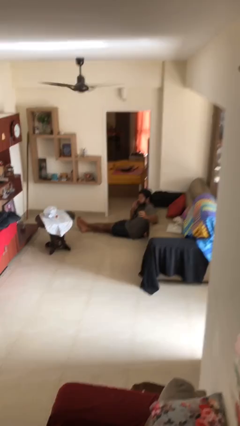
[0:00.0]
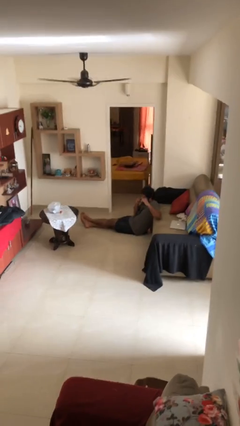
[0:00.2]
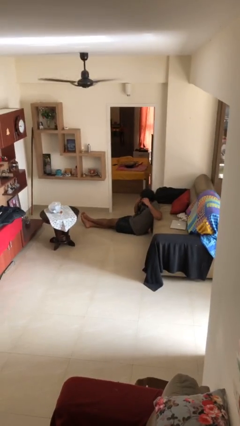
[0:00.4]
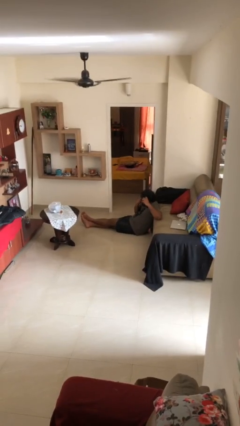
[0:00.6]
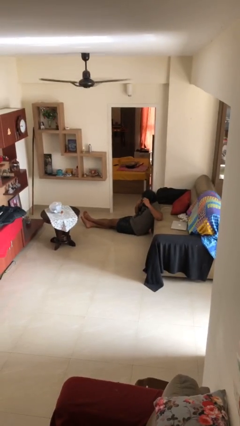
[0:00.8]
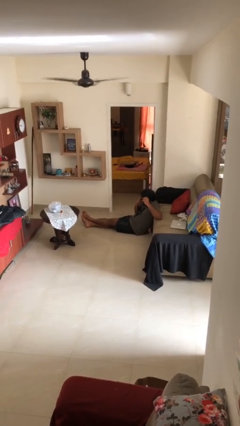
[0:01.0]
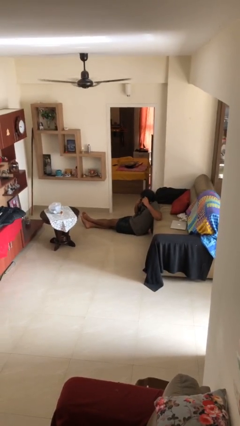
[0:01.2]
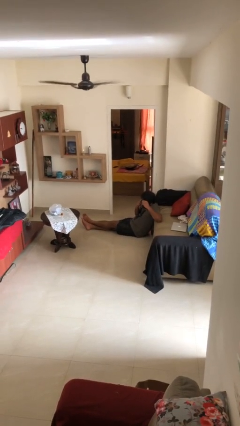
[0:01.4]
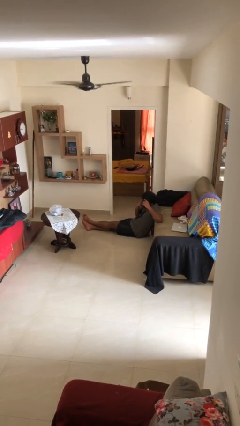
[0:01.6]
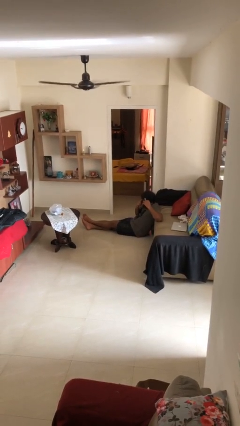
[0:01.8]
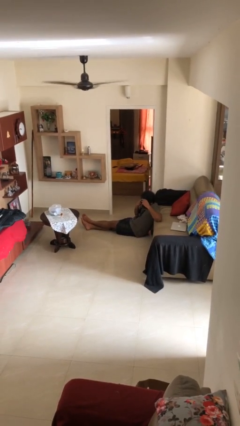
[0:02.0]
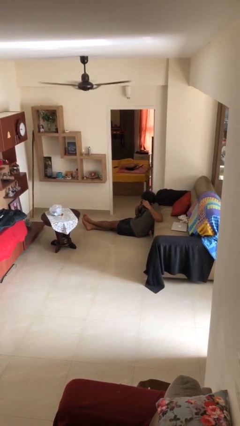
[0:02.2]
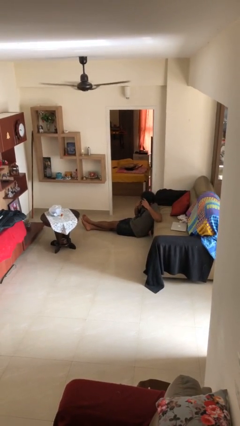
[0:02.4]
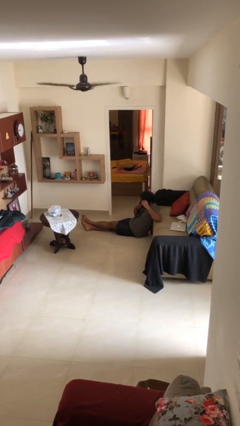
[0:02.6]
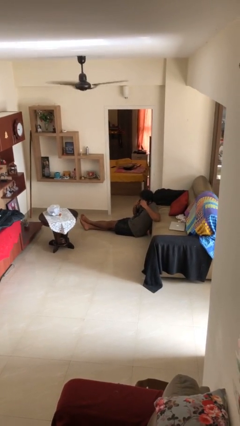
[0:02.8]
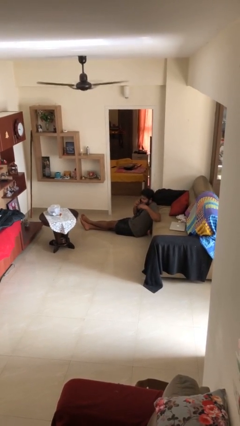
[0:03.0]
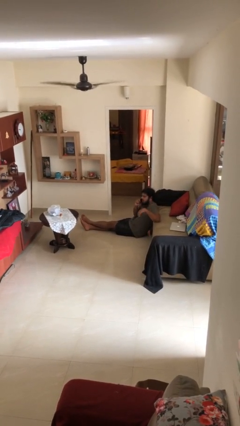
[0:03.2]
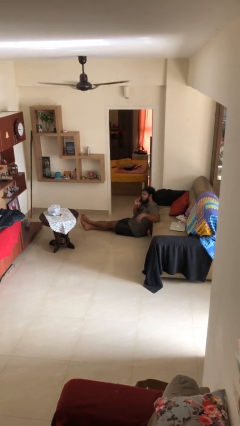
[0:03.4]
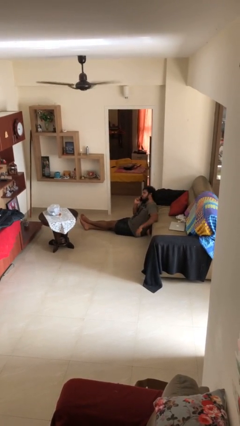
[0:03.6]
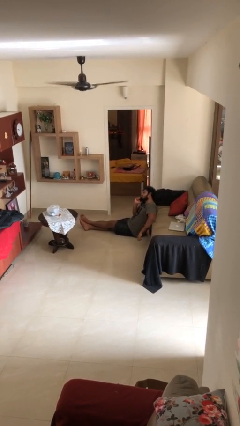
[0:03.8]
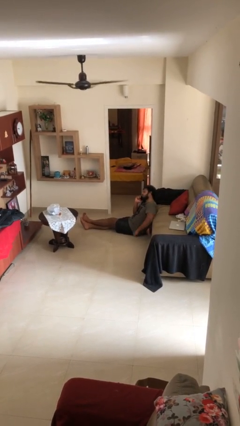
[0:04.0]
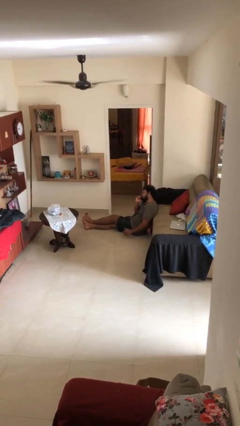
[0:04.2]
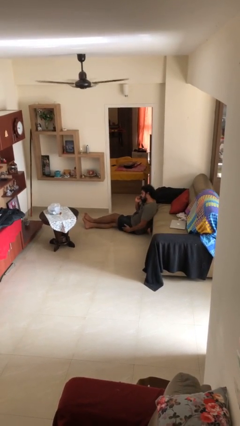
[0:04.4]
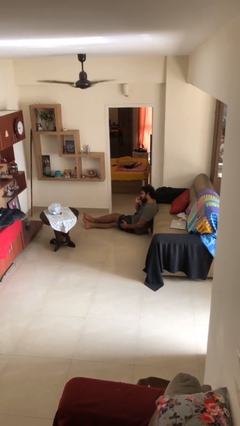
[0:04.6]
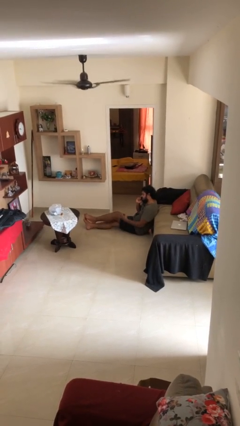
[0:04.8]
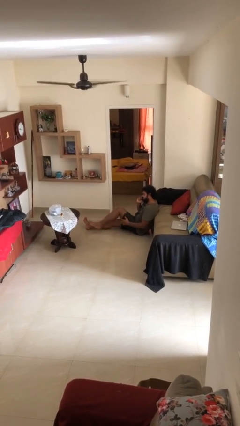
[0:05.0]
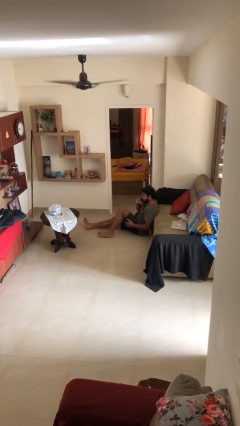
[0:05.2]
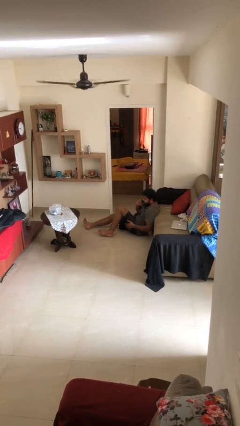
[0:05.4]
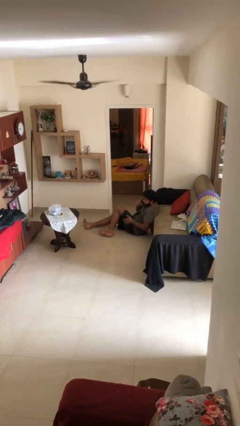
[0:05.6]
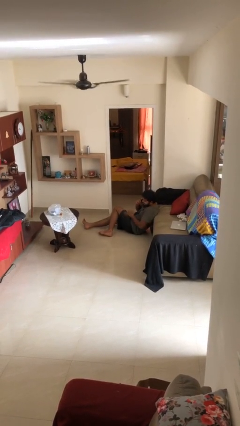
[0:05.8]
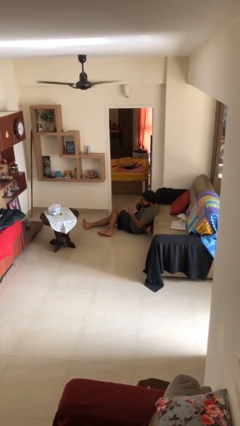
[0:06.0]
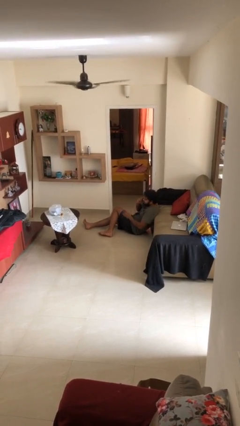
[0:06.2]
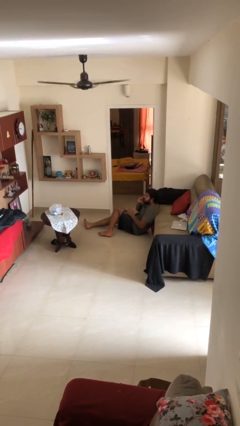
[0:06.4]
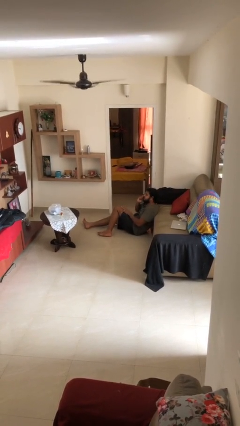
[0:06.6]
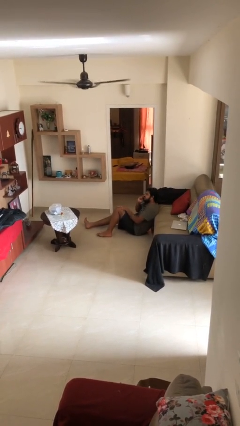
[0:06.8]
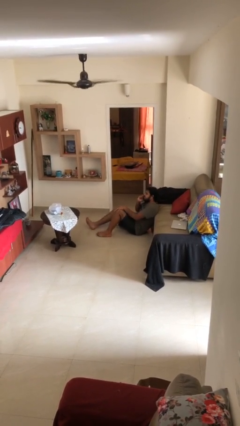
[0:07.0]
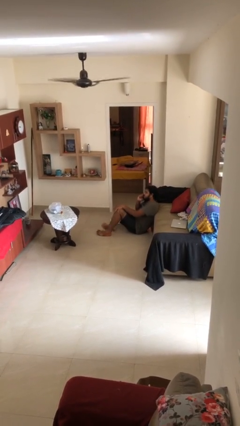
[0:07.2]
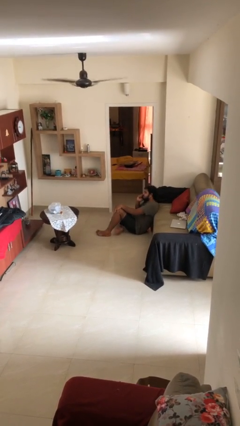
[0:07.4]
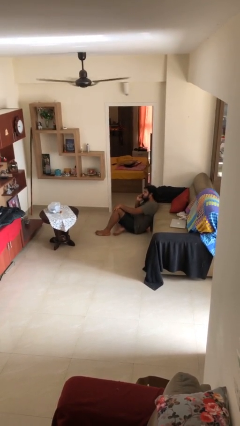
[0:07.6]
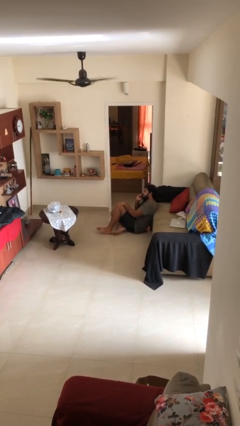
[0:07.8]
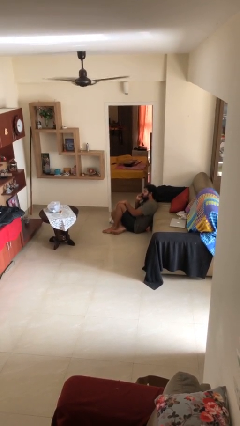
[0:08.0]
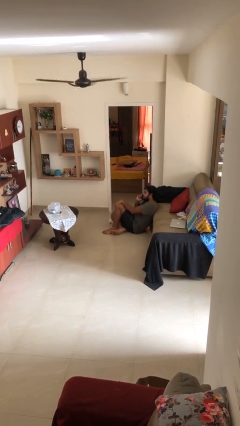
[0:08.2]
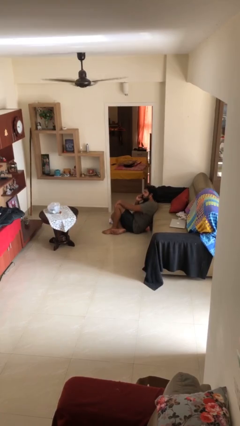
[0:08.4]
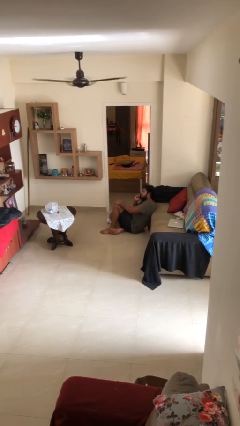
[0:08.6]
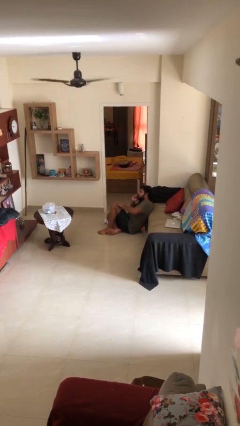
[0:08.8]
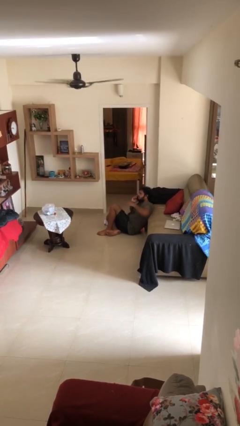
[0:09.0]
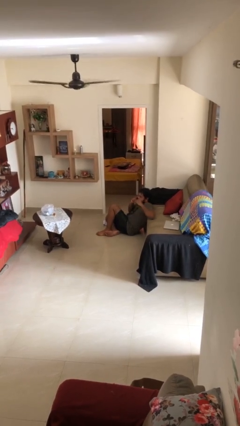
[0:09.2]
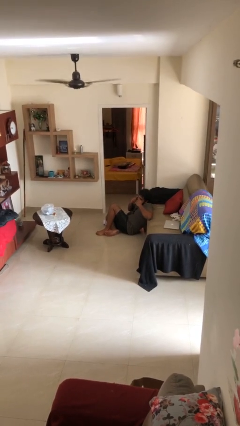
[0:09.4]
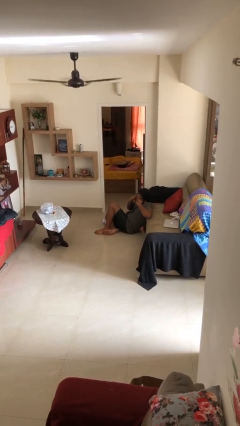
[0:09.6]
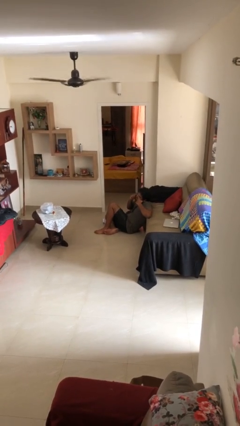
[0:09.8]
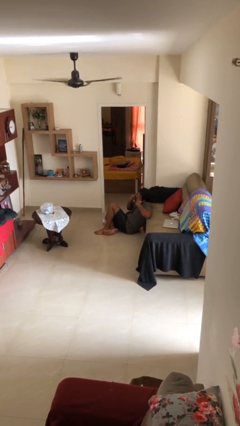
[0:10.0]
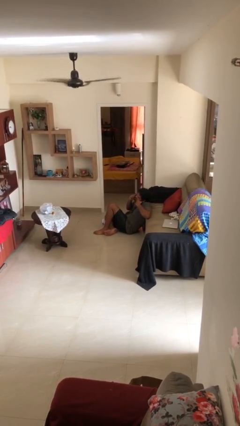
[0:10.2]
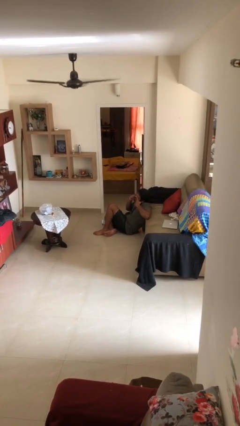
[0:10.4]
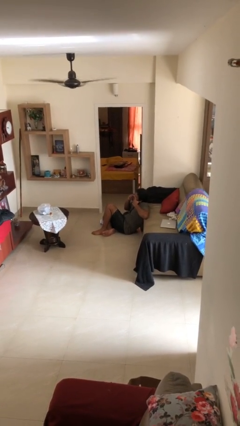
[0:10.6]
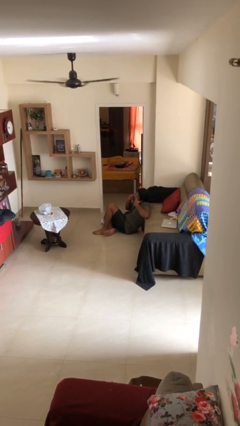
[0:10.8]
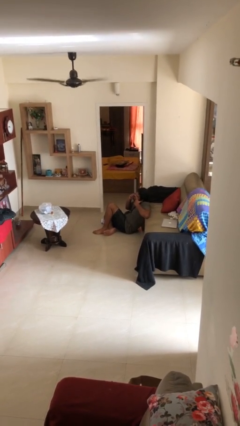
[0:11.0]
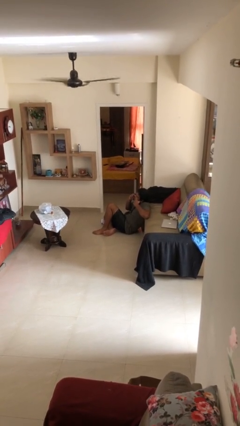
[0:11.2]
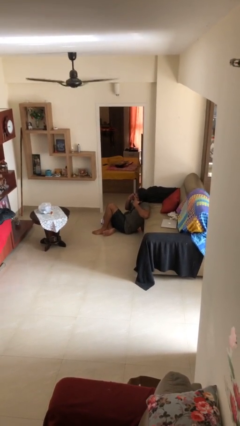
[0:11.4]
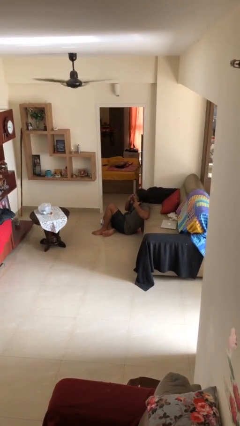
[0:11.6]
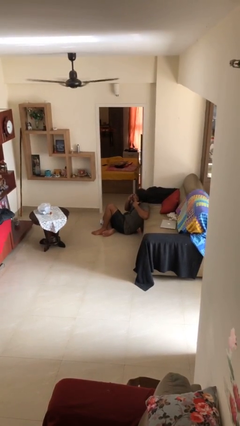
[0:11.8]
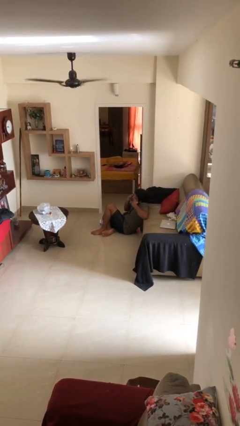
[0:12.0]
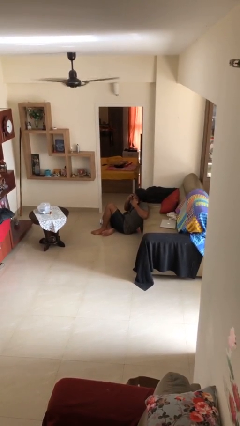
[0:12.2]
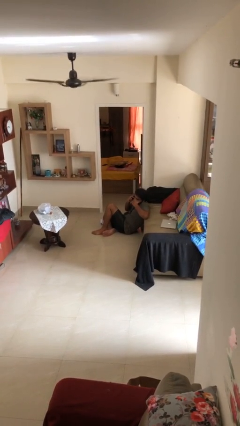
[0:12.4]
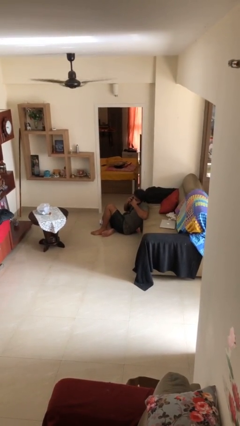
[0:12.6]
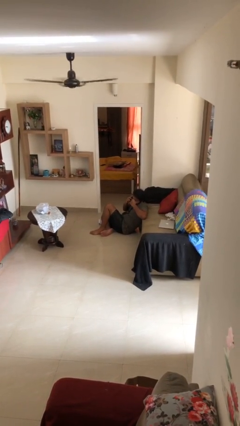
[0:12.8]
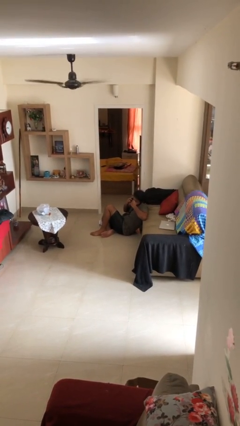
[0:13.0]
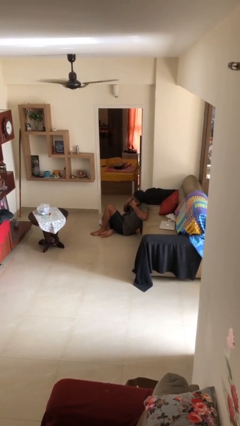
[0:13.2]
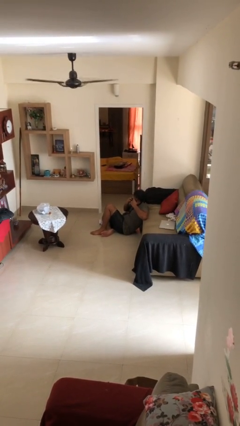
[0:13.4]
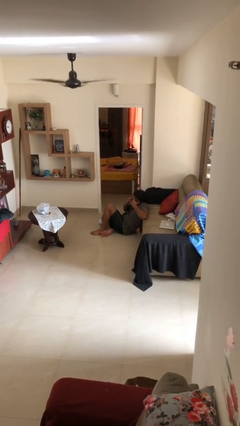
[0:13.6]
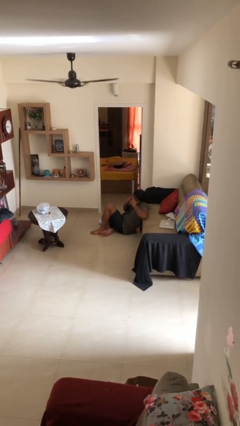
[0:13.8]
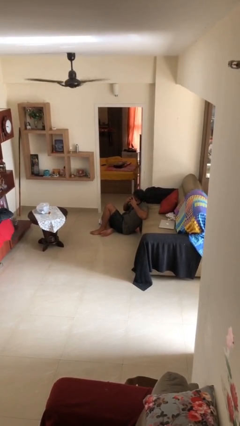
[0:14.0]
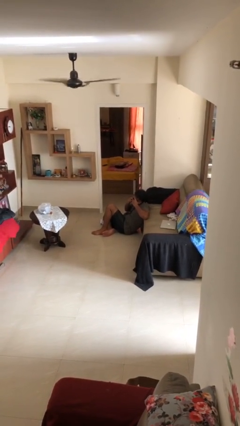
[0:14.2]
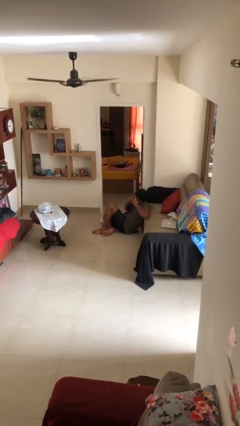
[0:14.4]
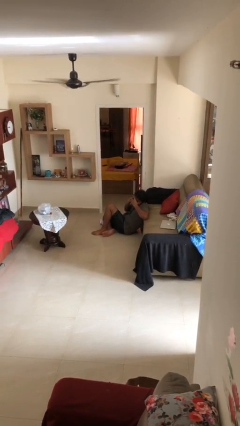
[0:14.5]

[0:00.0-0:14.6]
person talks on phone

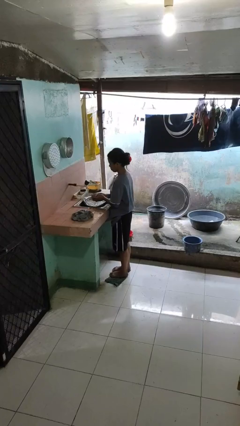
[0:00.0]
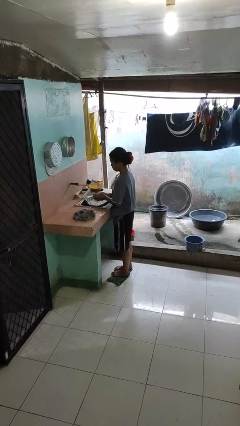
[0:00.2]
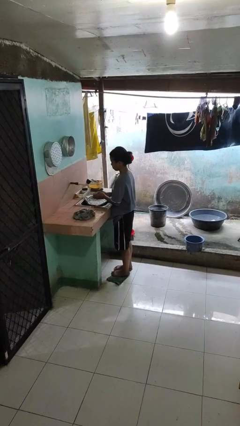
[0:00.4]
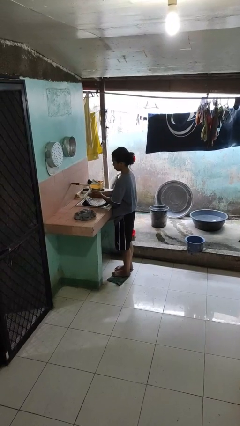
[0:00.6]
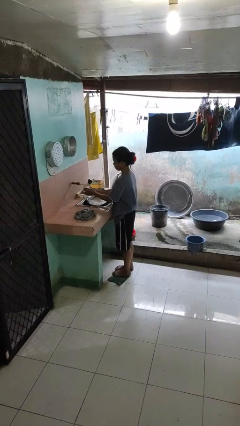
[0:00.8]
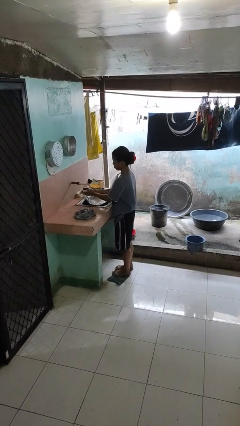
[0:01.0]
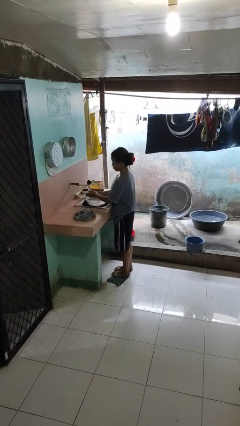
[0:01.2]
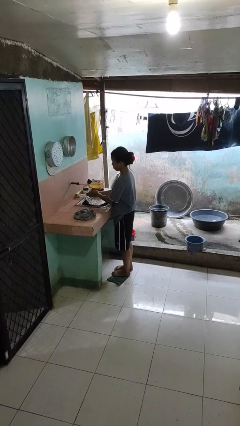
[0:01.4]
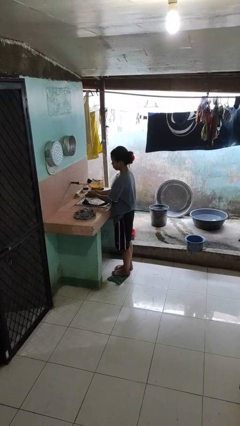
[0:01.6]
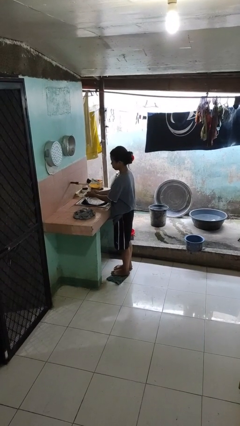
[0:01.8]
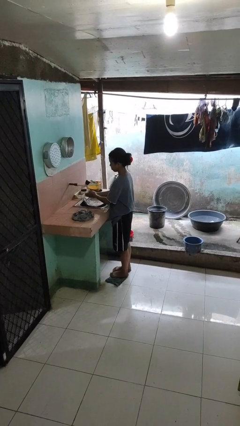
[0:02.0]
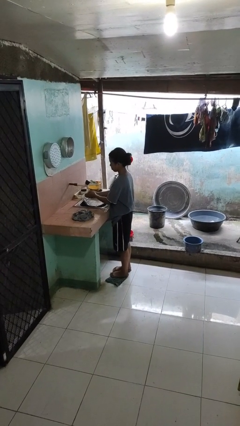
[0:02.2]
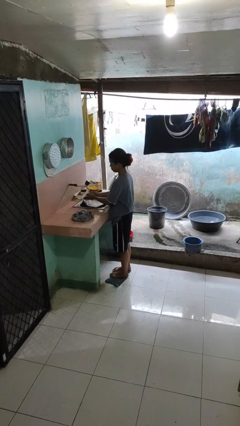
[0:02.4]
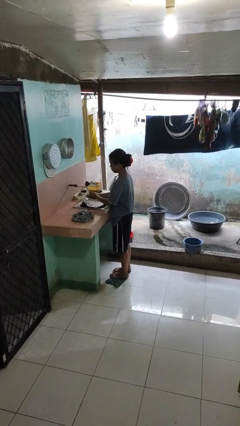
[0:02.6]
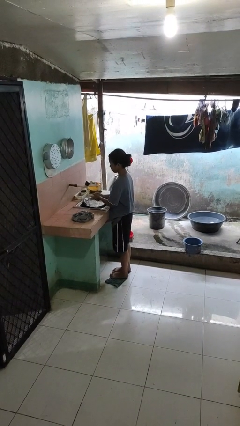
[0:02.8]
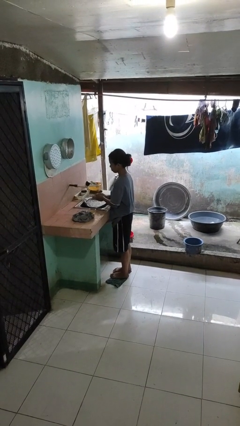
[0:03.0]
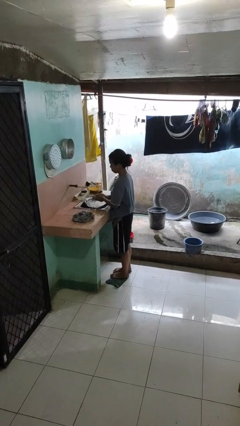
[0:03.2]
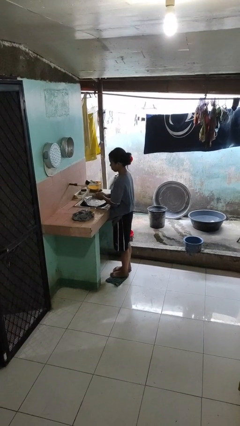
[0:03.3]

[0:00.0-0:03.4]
person washes hands
